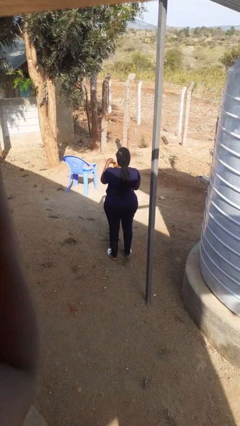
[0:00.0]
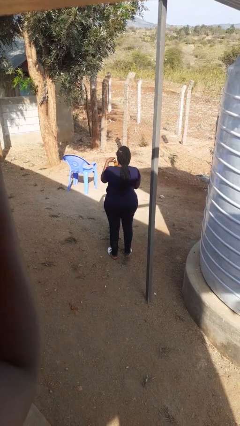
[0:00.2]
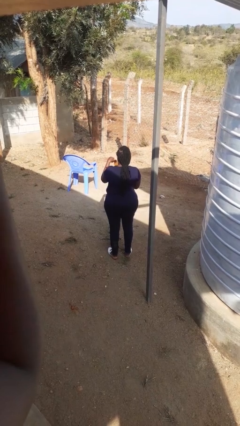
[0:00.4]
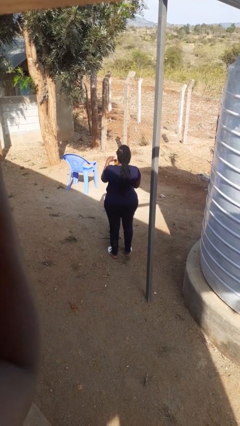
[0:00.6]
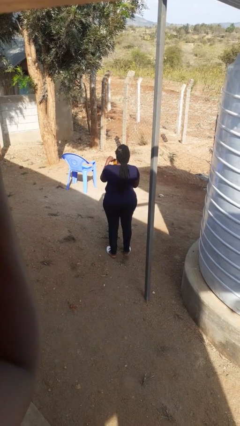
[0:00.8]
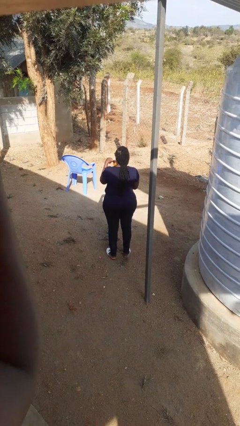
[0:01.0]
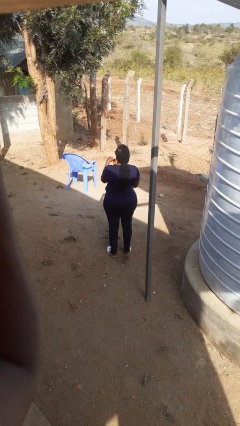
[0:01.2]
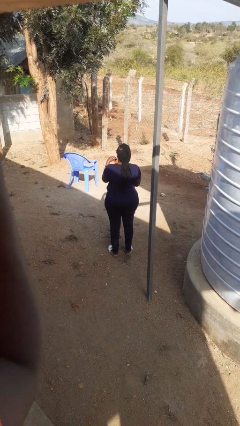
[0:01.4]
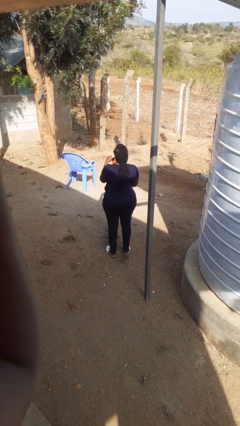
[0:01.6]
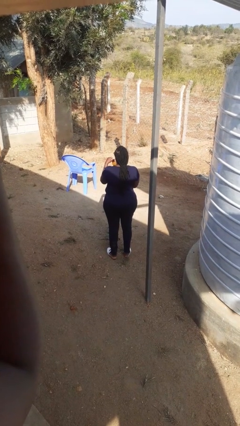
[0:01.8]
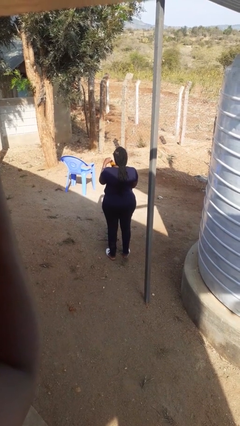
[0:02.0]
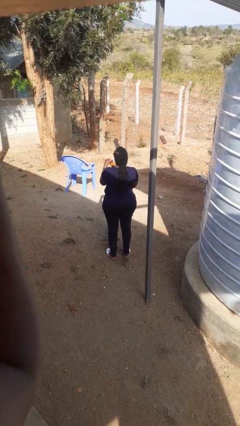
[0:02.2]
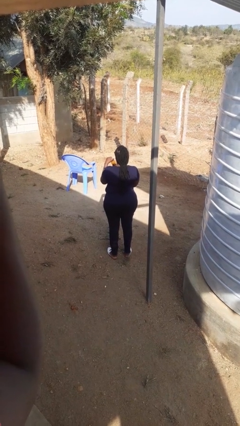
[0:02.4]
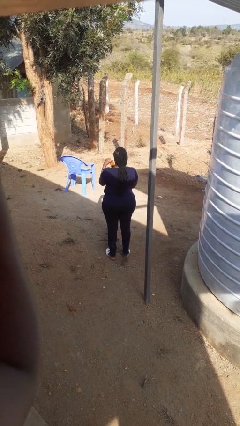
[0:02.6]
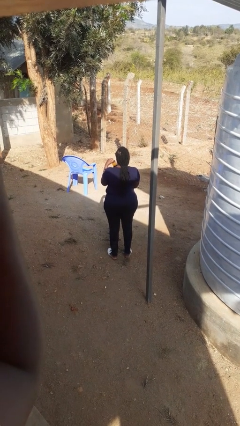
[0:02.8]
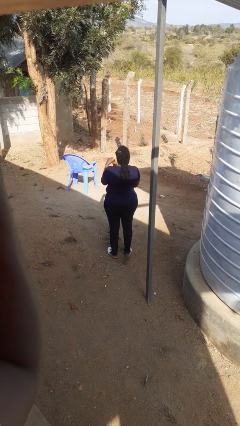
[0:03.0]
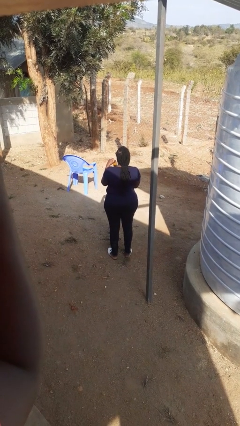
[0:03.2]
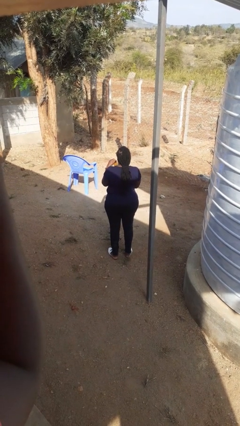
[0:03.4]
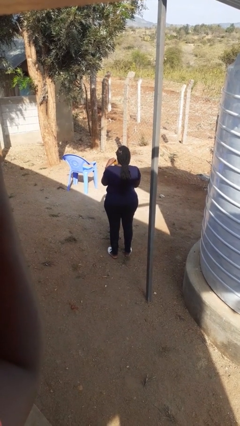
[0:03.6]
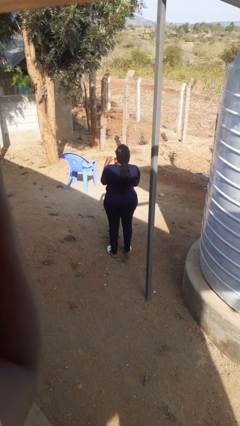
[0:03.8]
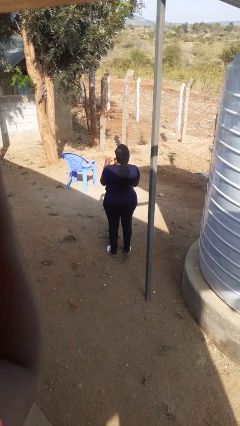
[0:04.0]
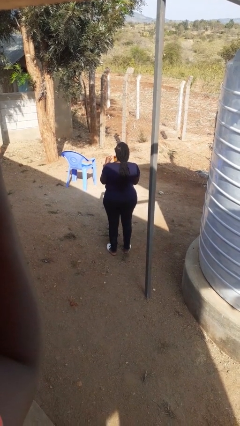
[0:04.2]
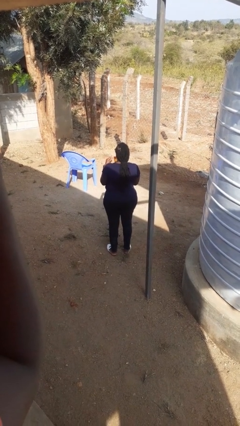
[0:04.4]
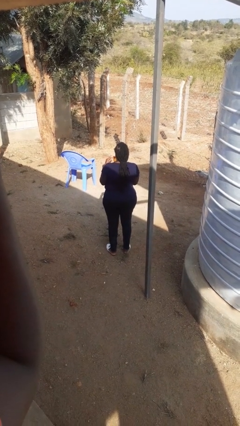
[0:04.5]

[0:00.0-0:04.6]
person closes jar

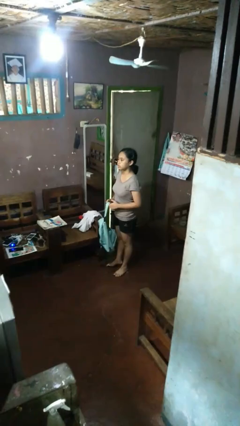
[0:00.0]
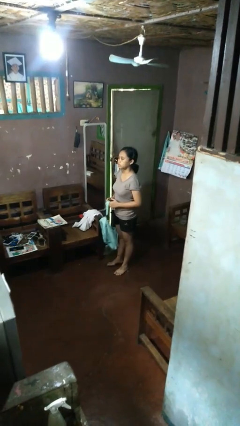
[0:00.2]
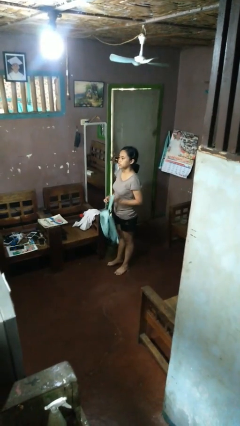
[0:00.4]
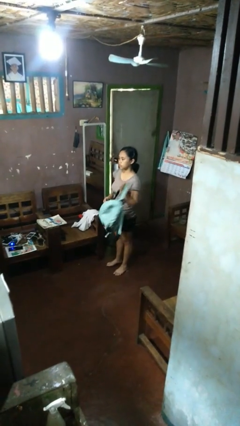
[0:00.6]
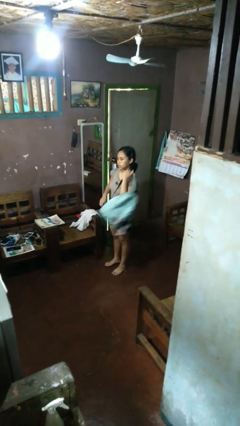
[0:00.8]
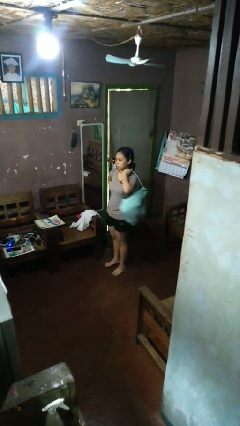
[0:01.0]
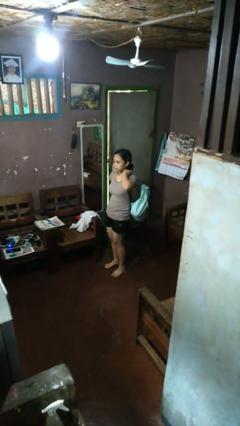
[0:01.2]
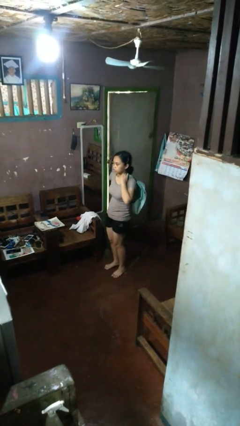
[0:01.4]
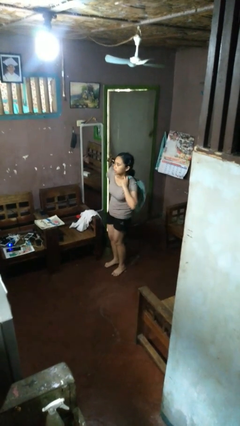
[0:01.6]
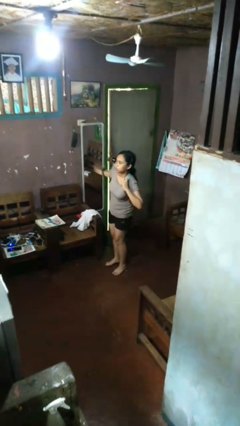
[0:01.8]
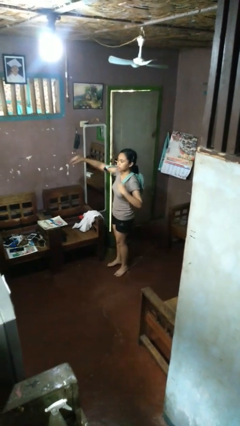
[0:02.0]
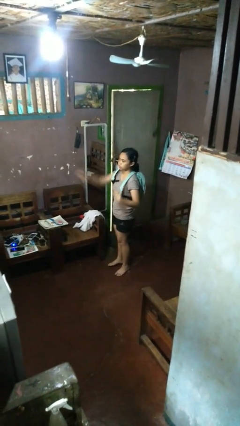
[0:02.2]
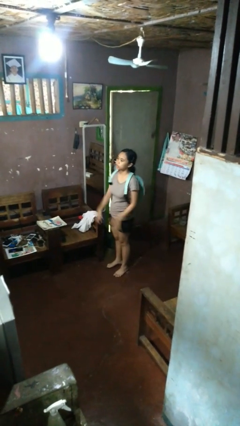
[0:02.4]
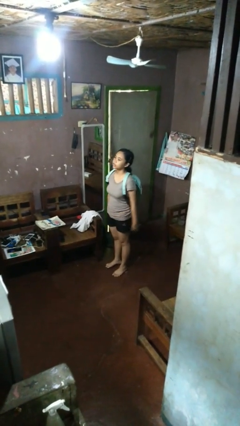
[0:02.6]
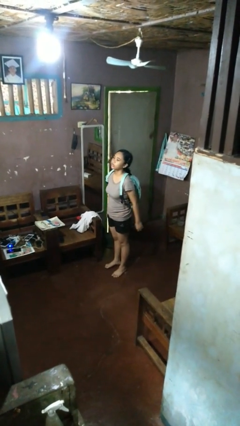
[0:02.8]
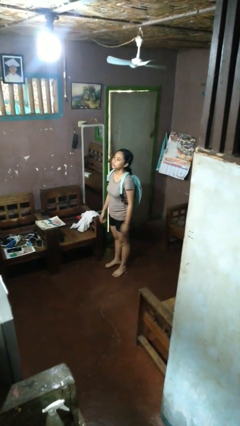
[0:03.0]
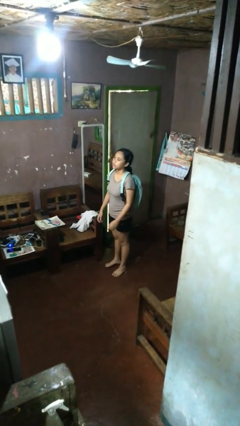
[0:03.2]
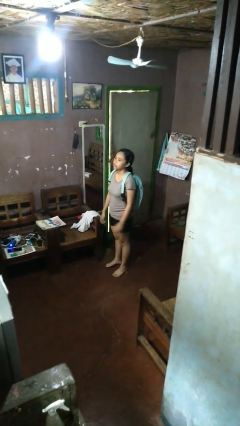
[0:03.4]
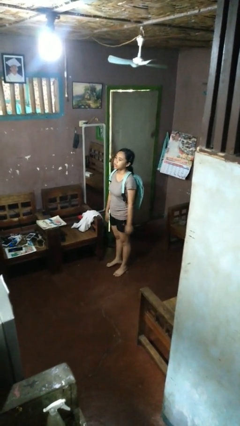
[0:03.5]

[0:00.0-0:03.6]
person puts on backpack

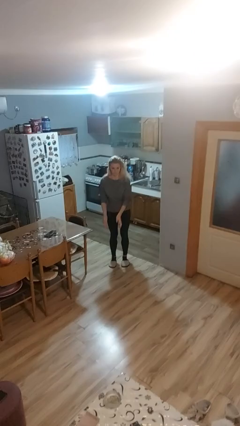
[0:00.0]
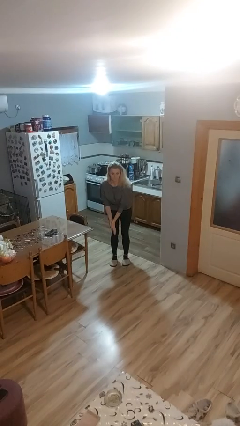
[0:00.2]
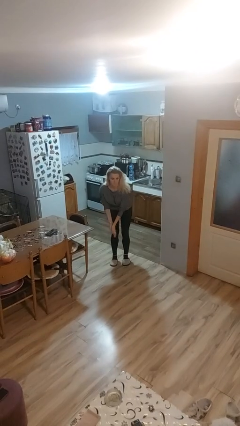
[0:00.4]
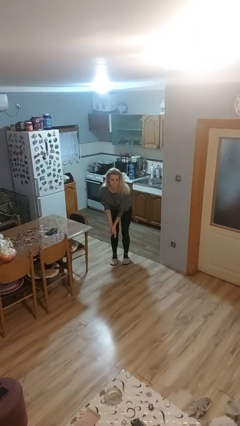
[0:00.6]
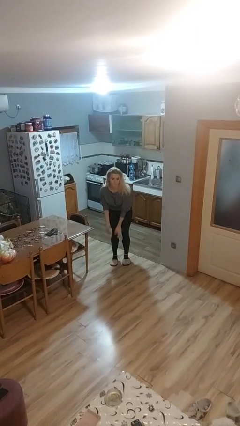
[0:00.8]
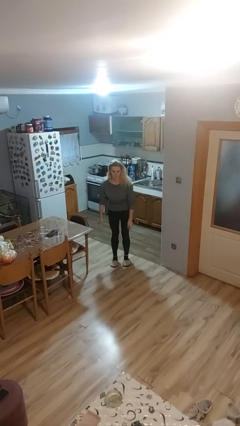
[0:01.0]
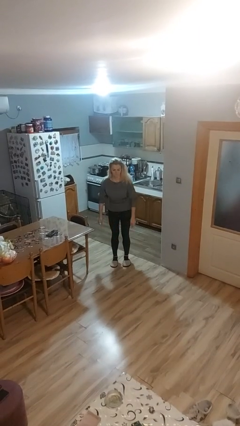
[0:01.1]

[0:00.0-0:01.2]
person claps hands

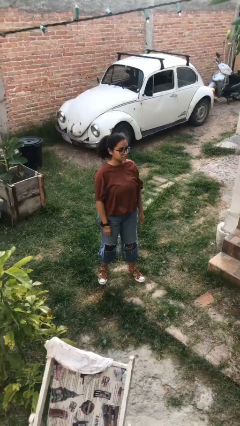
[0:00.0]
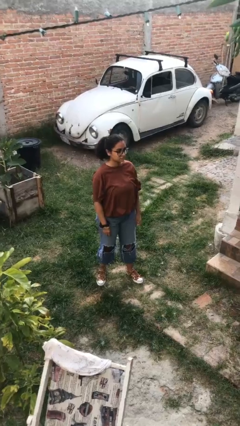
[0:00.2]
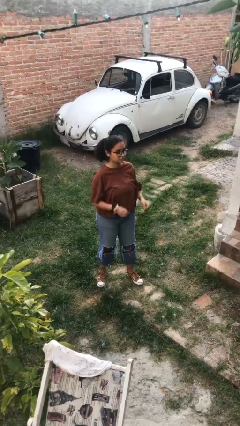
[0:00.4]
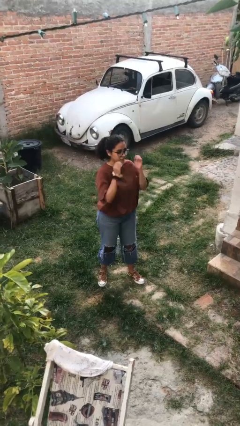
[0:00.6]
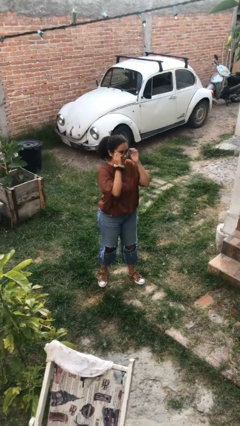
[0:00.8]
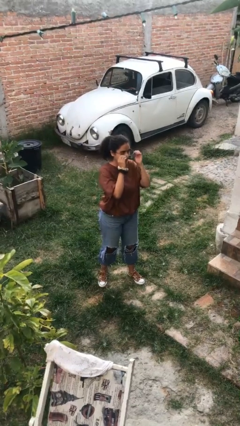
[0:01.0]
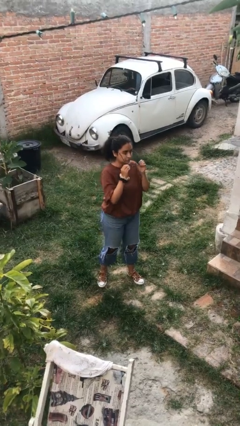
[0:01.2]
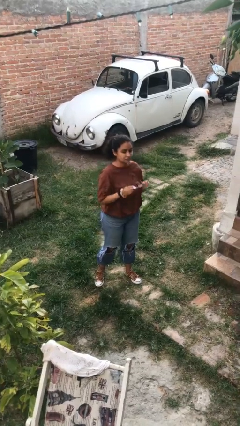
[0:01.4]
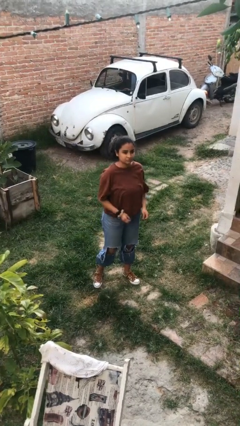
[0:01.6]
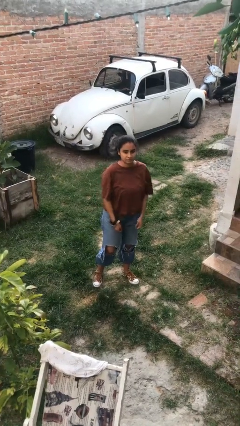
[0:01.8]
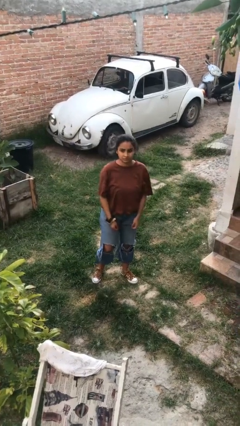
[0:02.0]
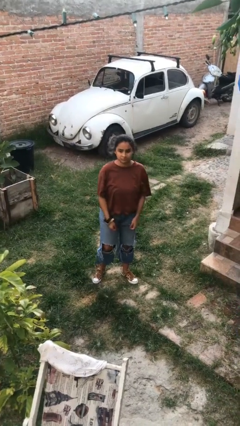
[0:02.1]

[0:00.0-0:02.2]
person takes off glasses

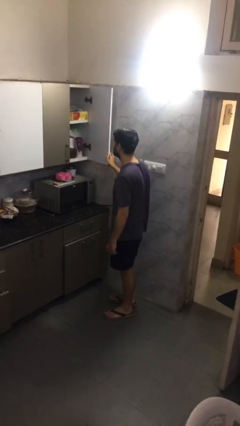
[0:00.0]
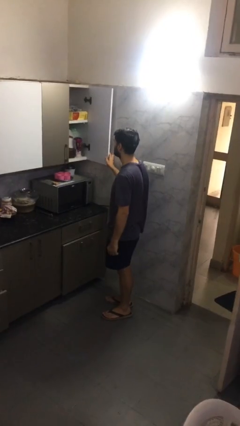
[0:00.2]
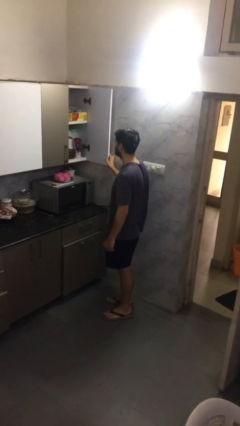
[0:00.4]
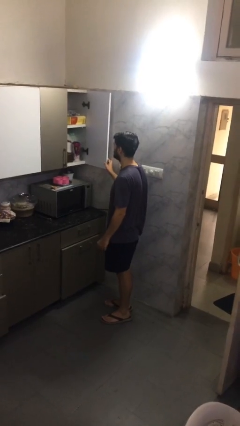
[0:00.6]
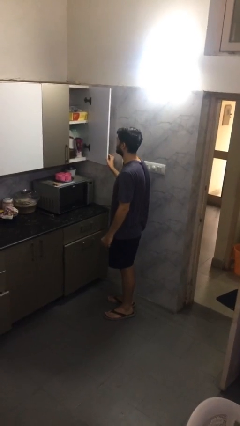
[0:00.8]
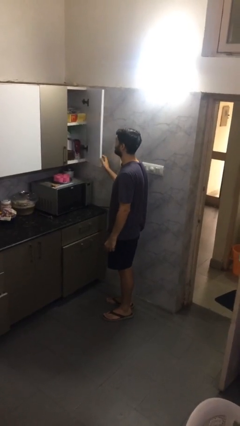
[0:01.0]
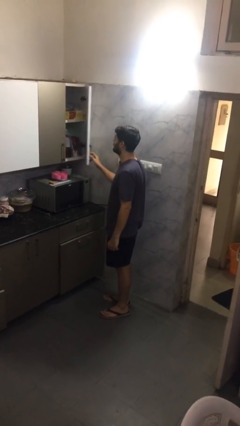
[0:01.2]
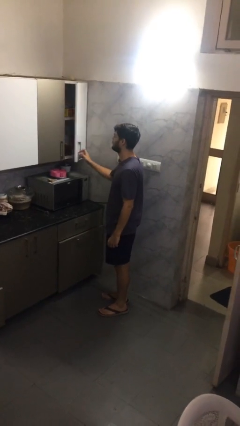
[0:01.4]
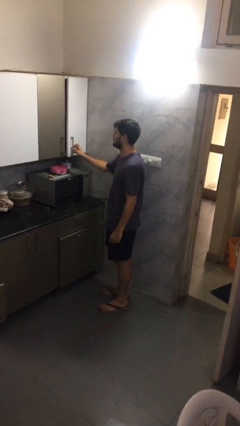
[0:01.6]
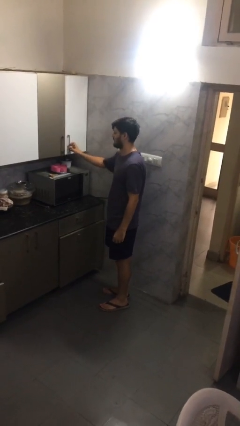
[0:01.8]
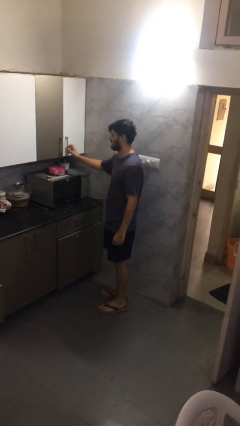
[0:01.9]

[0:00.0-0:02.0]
person closes cabinet

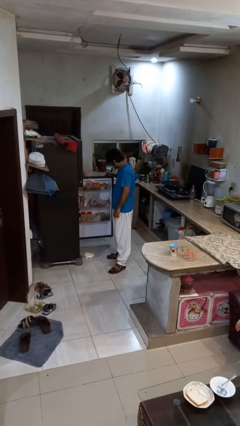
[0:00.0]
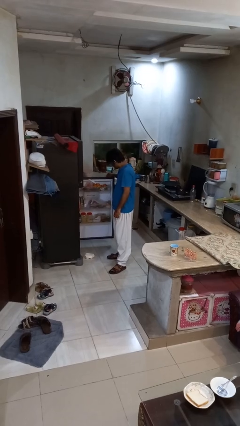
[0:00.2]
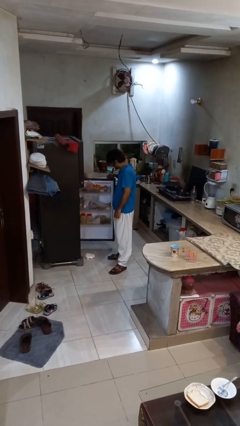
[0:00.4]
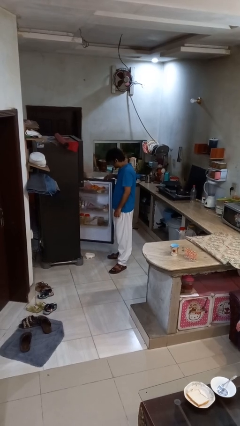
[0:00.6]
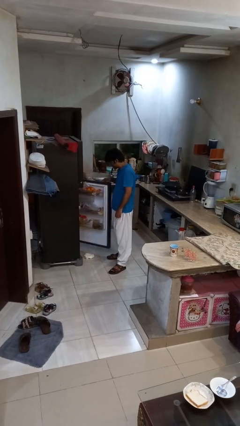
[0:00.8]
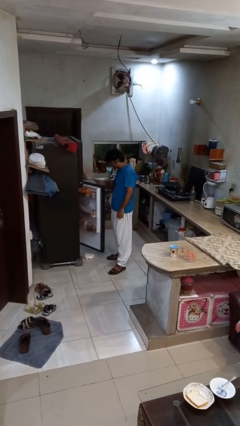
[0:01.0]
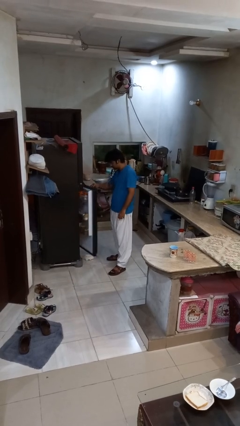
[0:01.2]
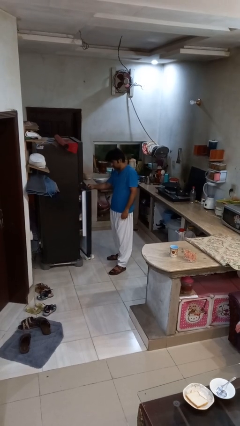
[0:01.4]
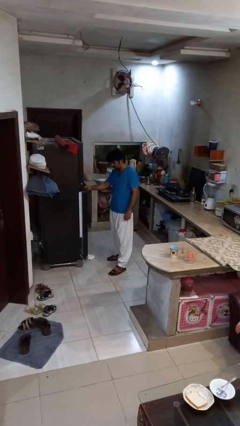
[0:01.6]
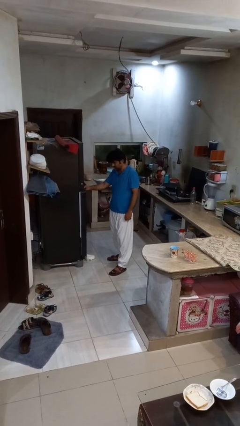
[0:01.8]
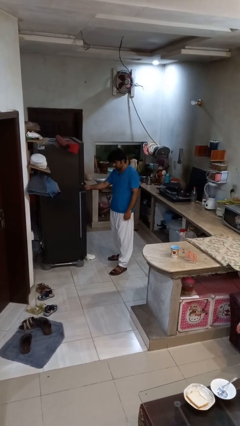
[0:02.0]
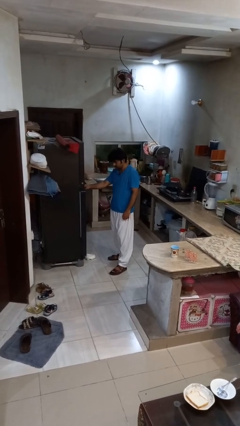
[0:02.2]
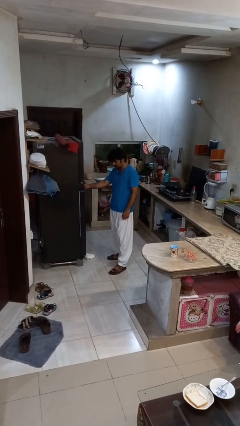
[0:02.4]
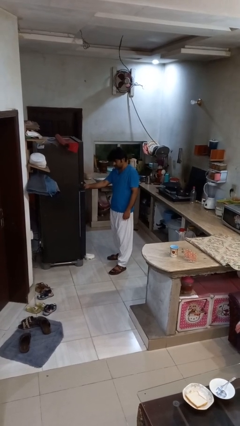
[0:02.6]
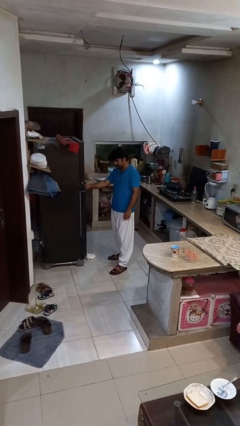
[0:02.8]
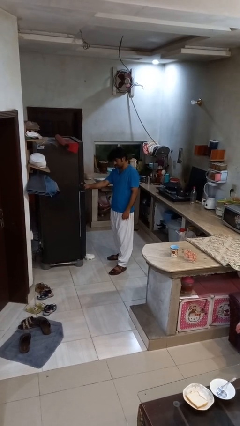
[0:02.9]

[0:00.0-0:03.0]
person closes refrigerator

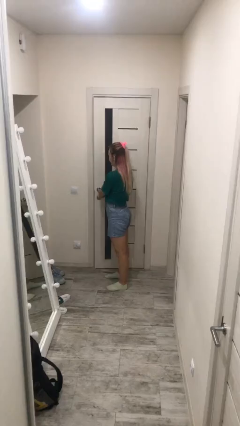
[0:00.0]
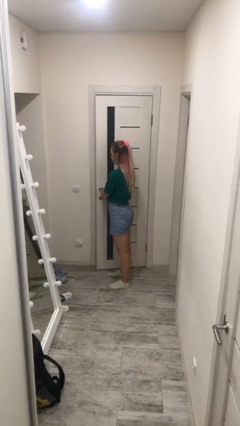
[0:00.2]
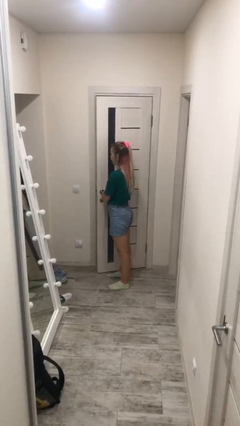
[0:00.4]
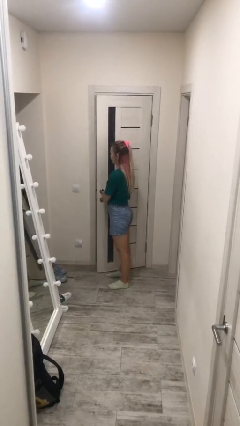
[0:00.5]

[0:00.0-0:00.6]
person opens facility door

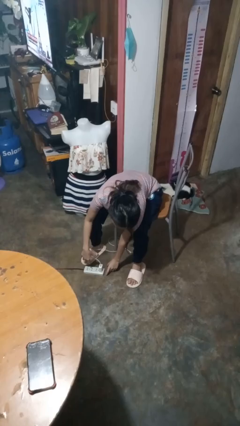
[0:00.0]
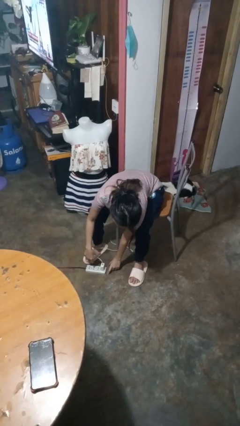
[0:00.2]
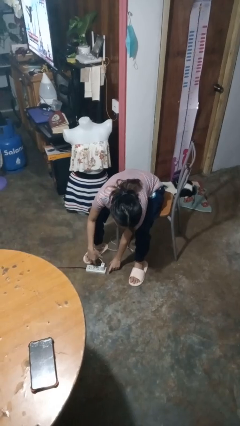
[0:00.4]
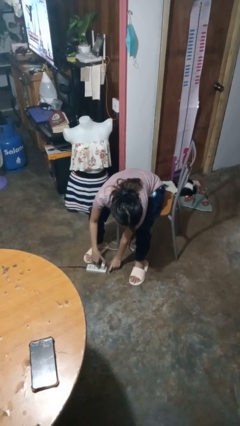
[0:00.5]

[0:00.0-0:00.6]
person unplugs from electrical socket
